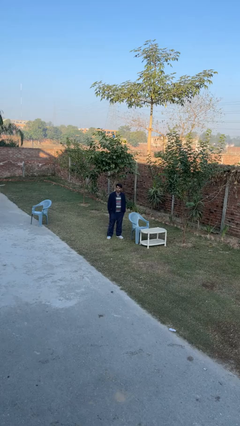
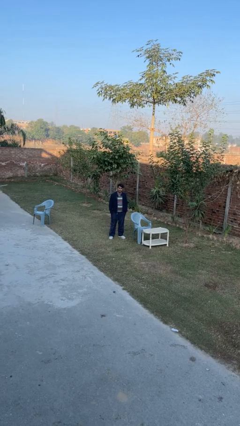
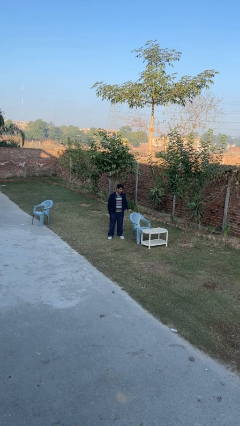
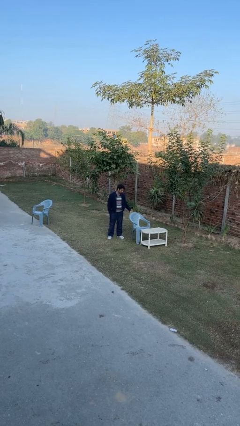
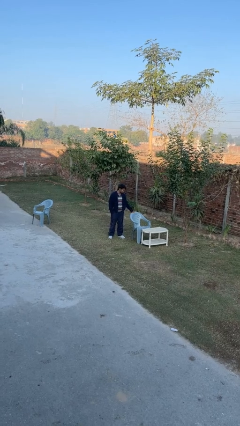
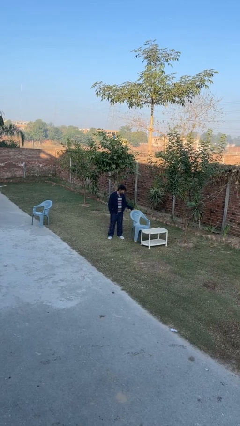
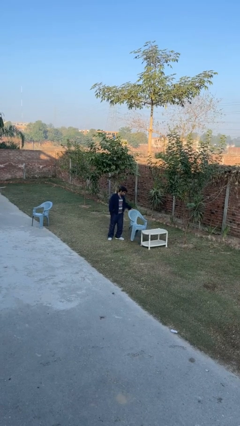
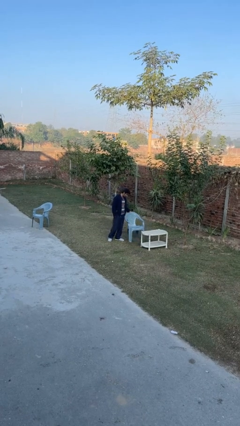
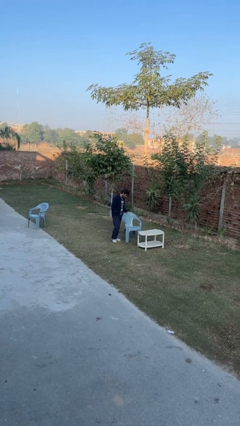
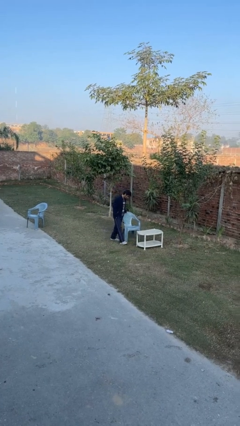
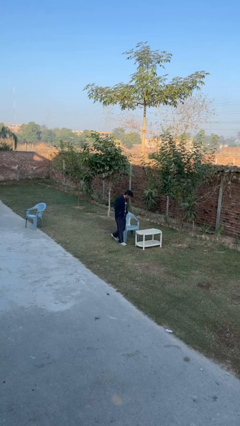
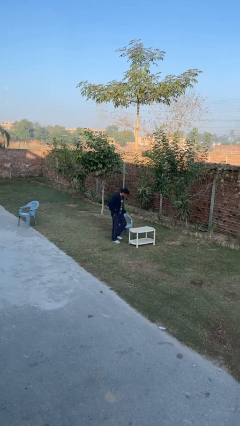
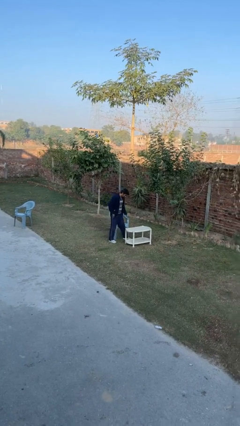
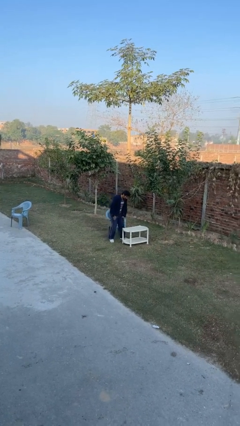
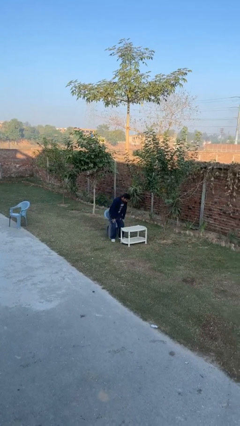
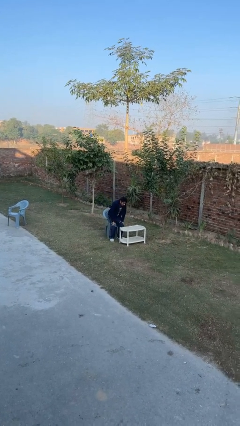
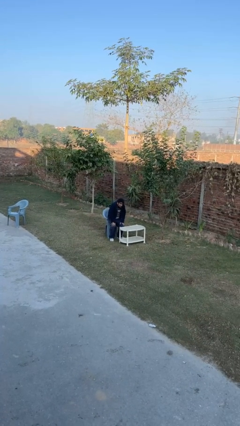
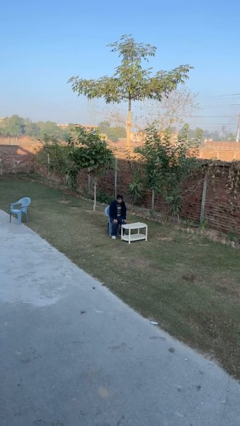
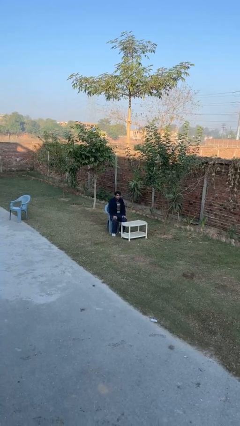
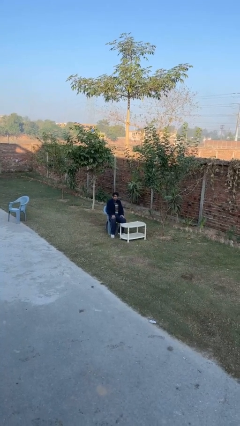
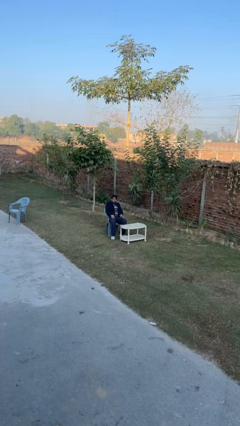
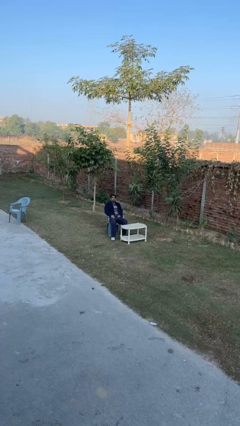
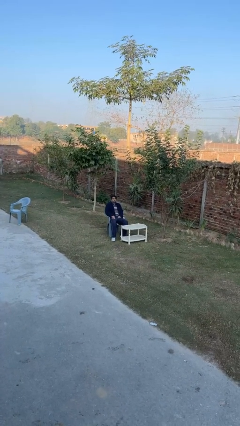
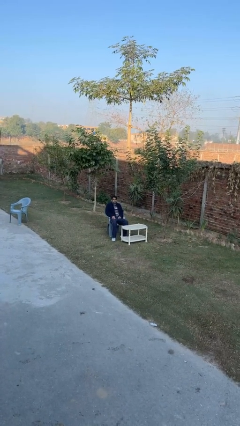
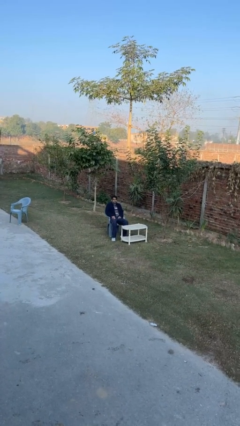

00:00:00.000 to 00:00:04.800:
person sits down

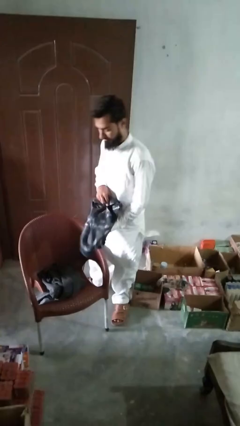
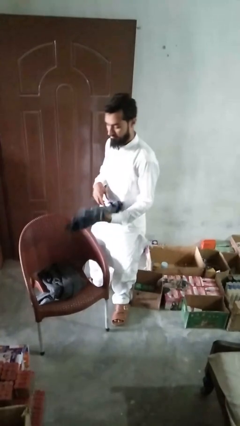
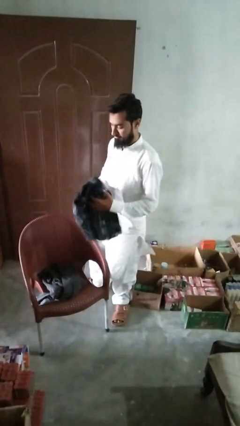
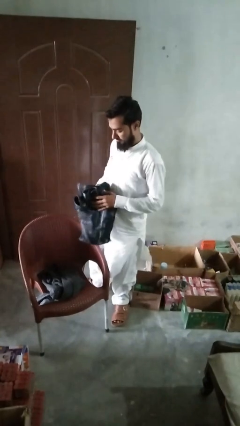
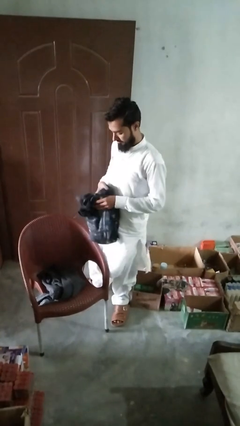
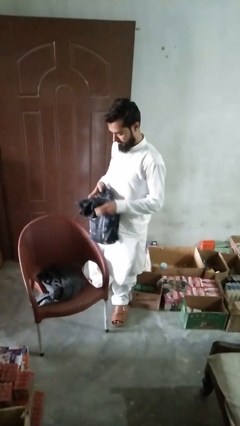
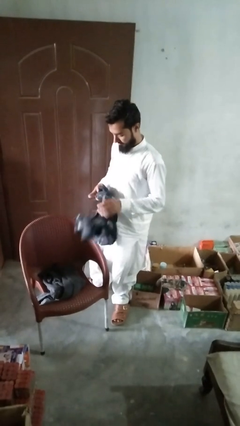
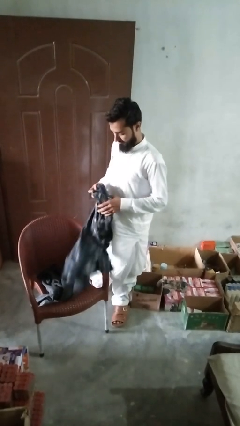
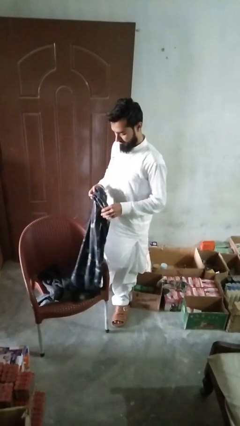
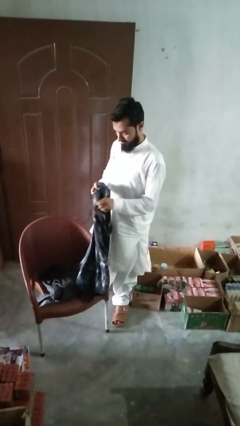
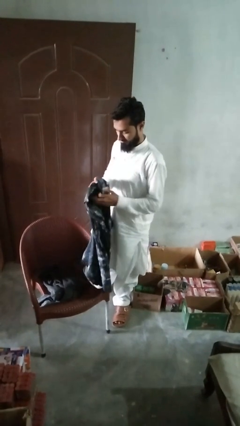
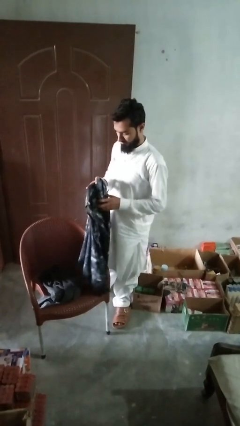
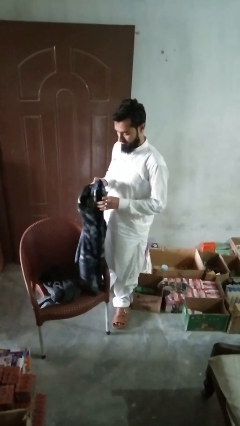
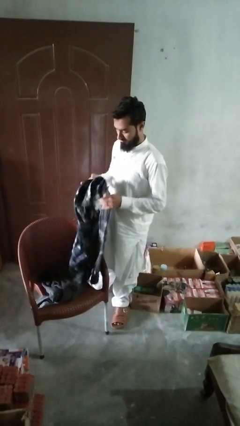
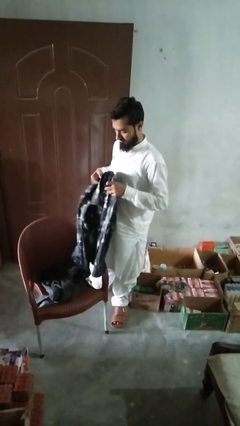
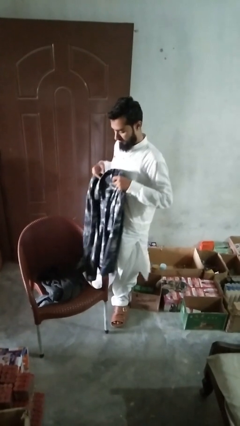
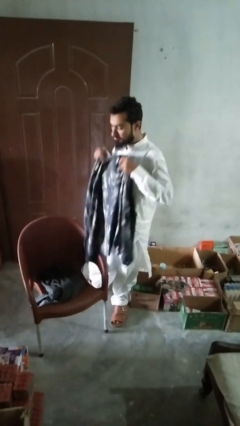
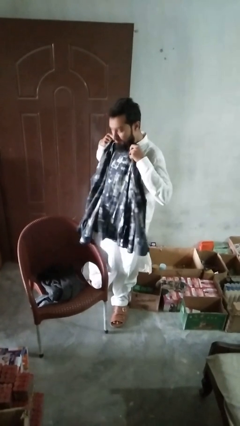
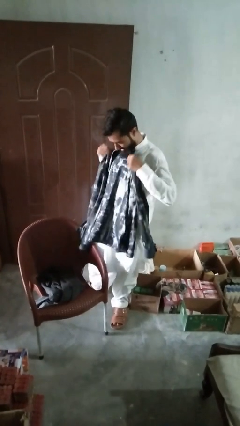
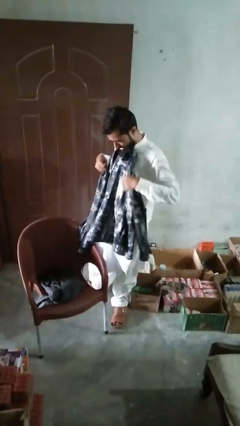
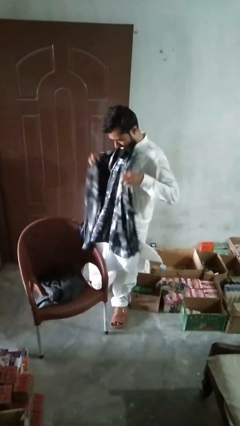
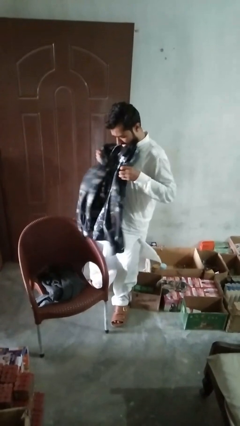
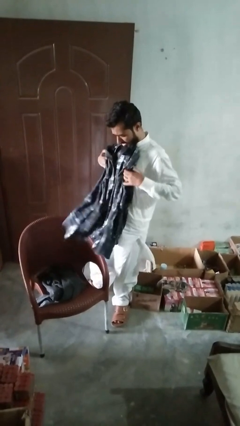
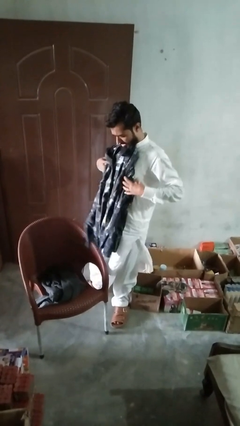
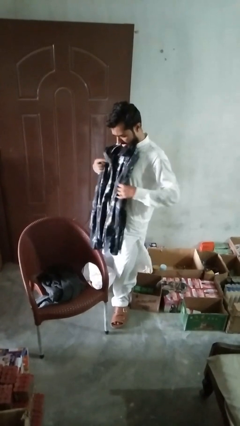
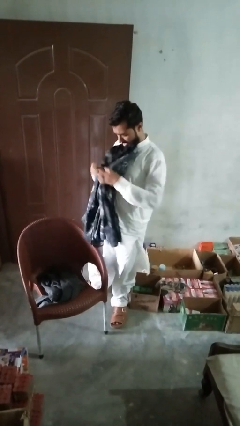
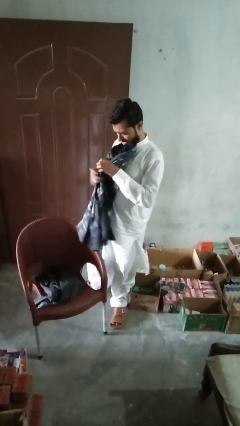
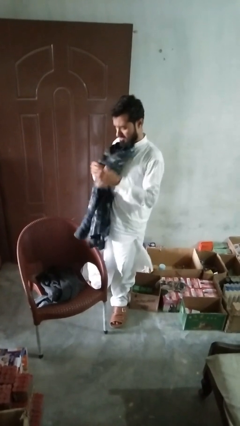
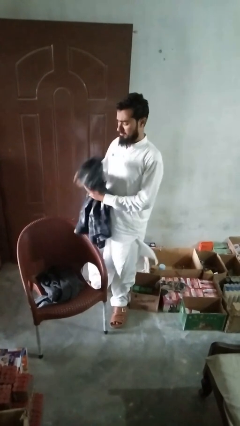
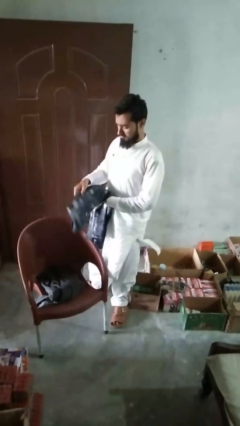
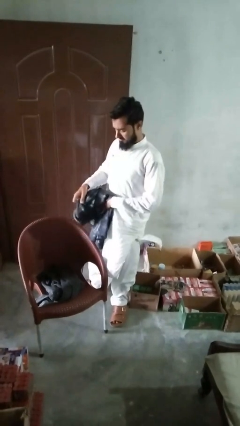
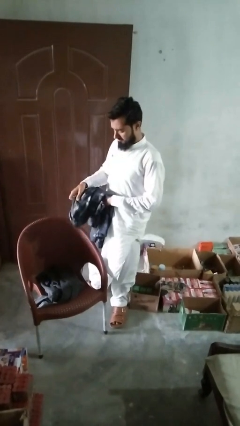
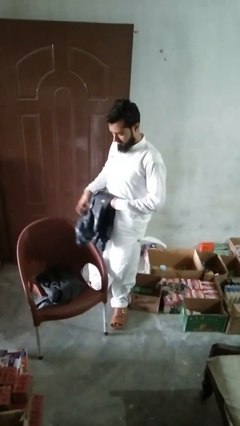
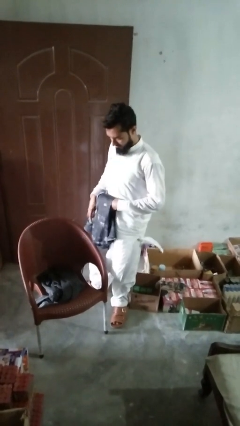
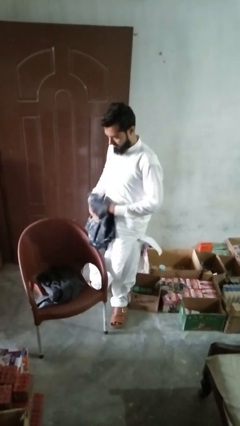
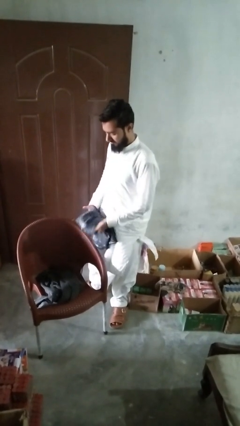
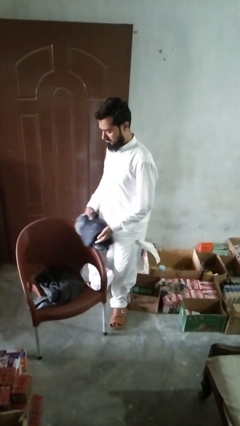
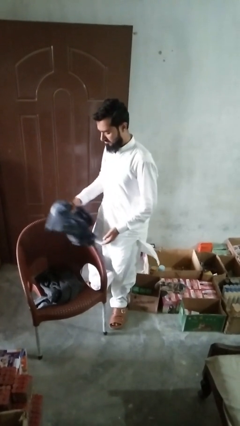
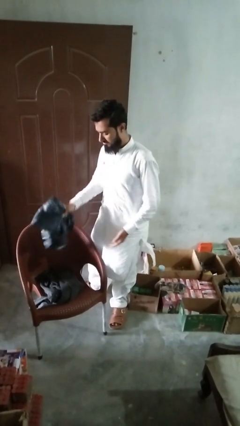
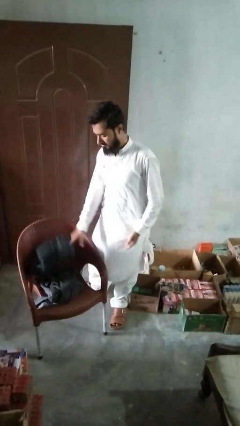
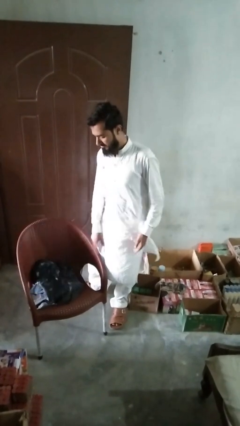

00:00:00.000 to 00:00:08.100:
person folds shirt

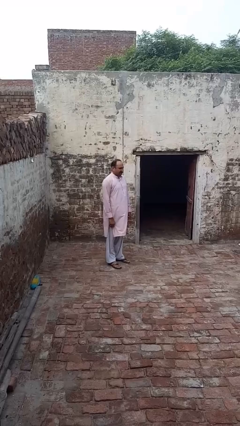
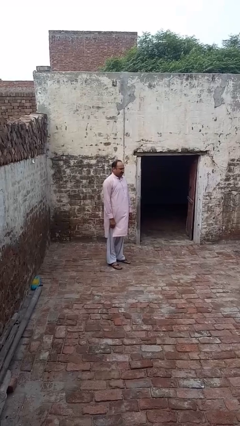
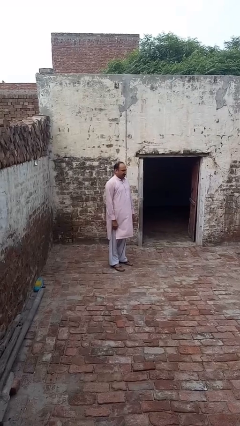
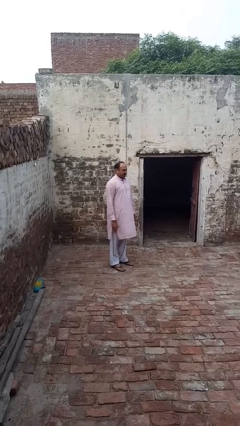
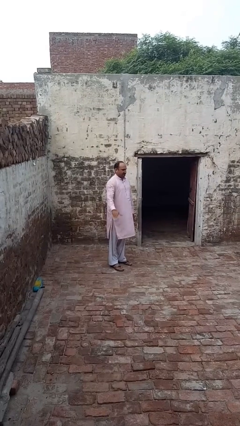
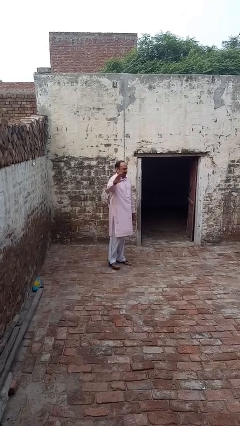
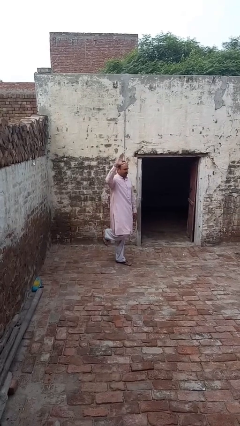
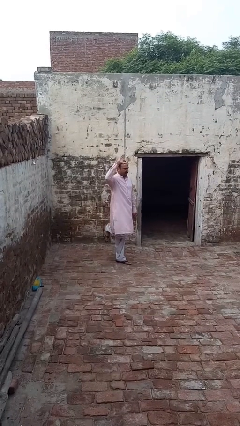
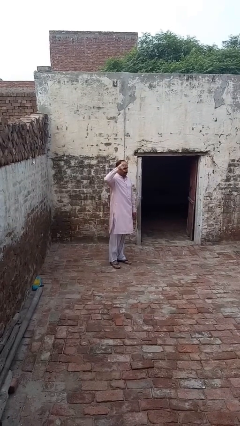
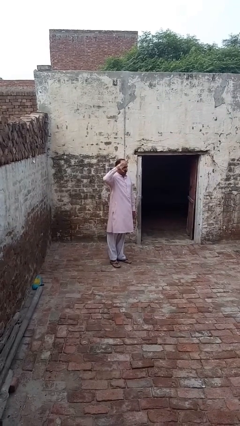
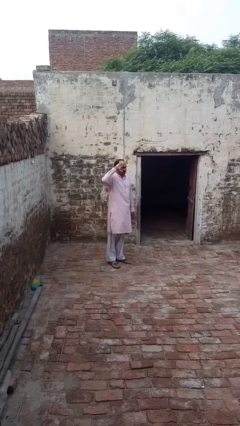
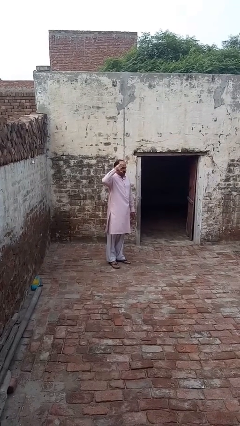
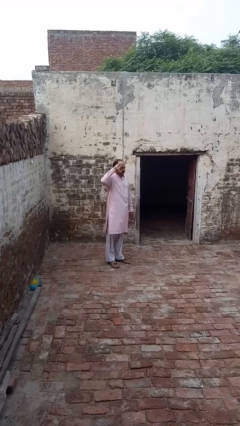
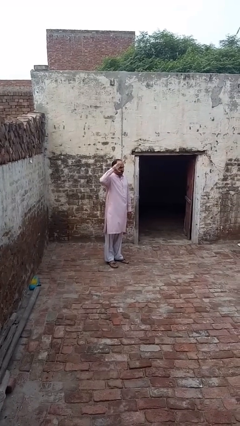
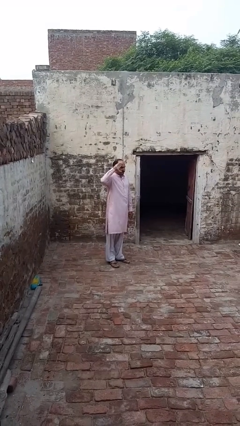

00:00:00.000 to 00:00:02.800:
person salutes

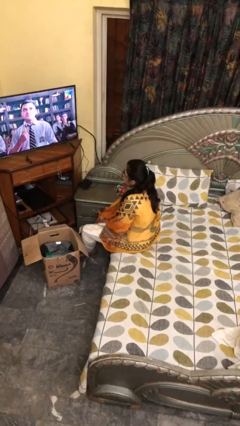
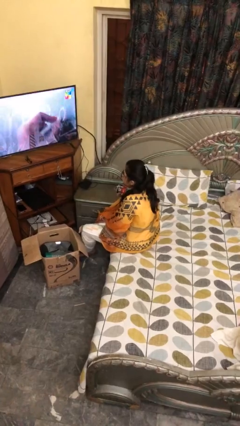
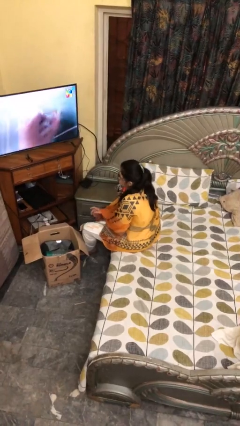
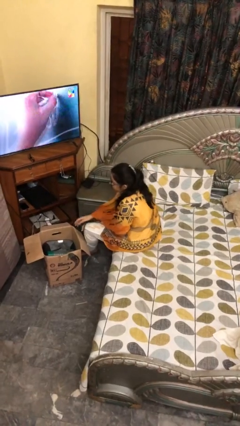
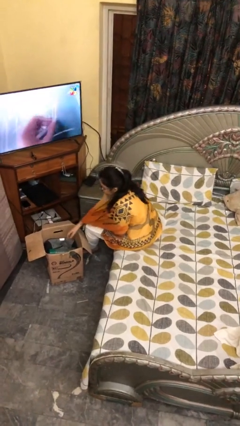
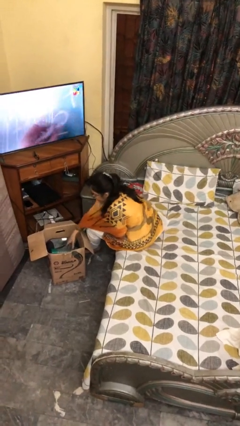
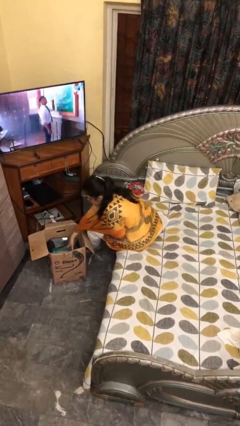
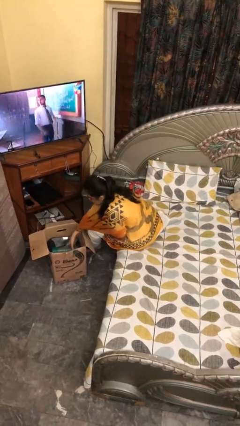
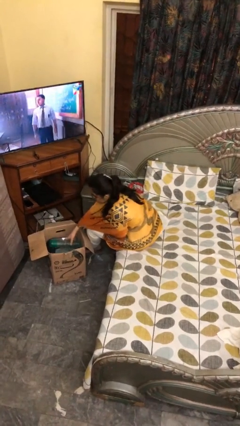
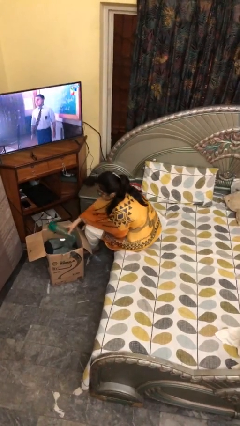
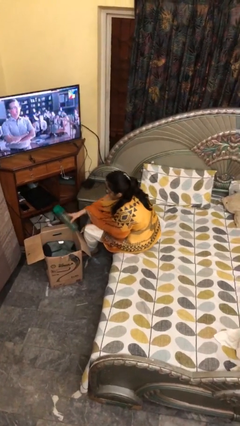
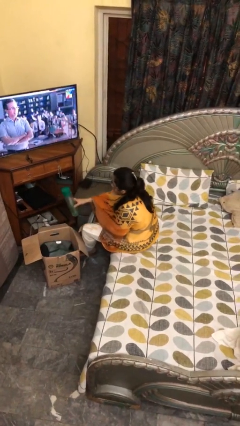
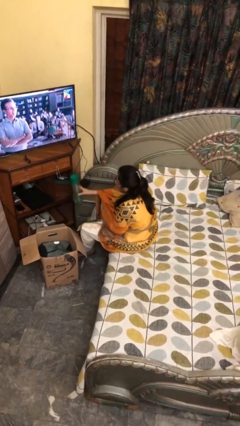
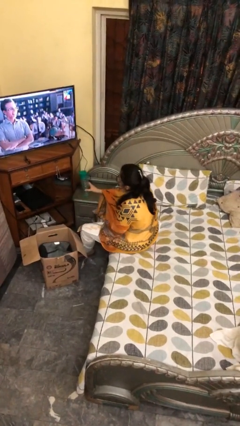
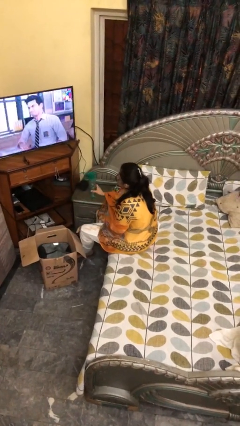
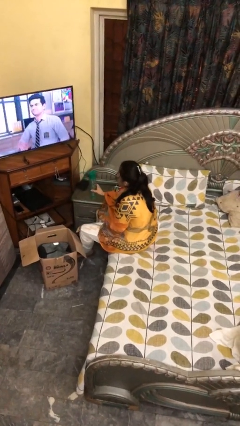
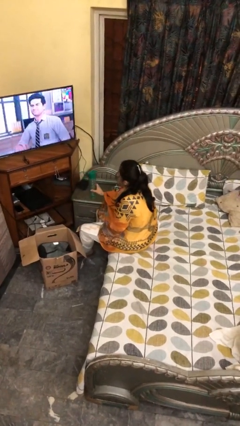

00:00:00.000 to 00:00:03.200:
person takes object from box
